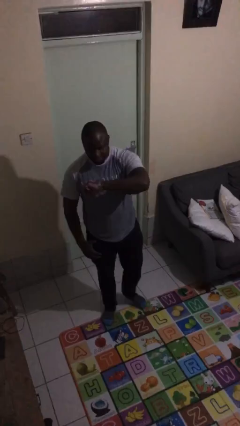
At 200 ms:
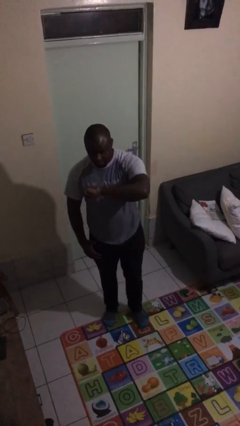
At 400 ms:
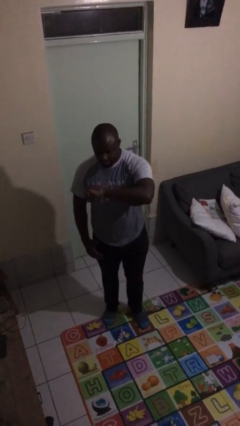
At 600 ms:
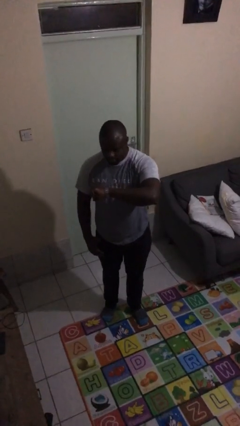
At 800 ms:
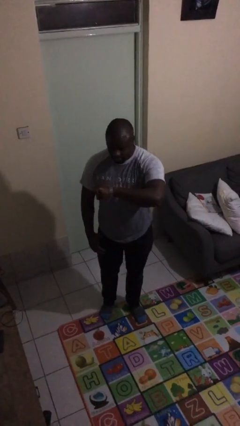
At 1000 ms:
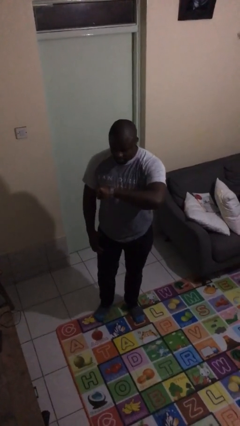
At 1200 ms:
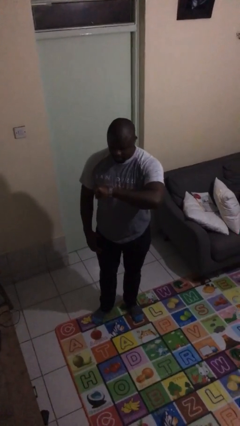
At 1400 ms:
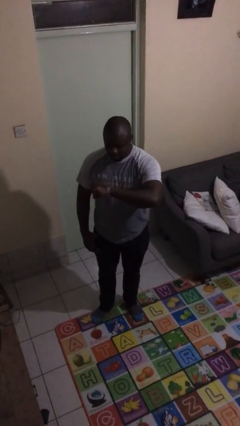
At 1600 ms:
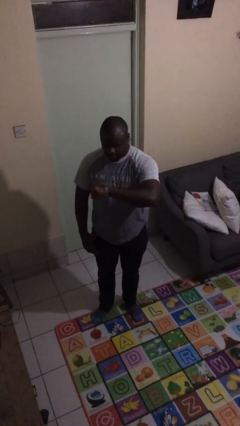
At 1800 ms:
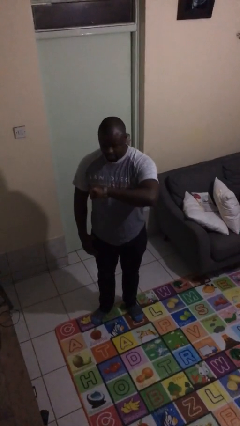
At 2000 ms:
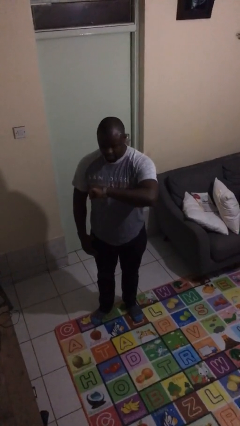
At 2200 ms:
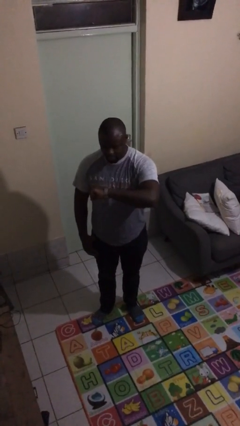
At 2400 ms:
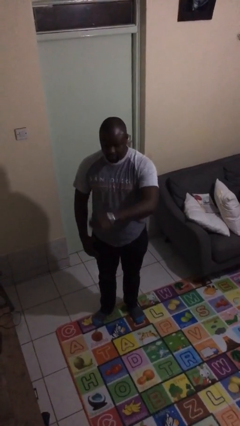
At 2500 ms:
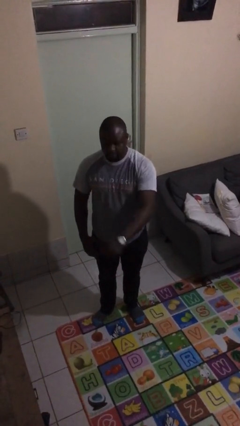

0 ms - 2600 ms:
person looks at wristwatch

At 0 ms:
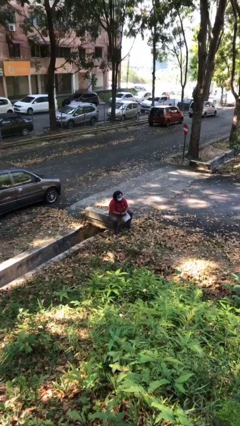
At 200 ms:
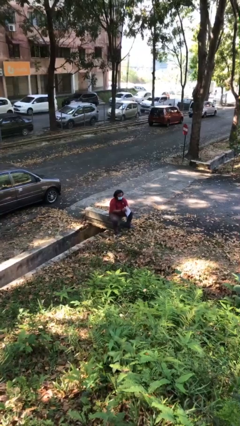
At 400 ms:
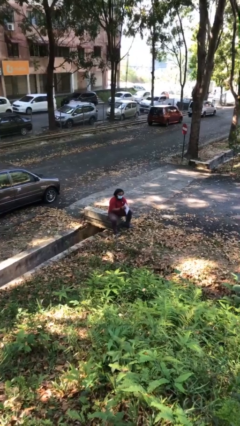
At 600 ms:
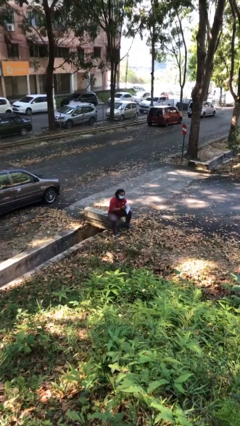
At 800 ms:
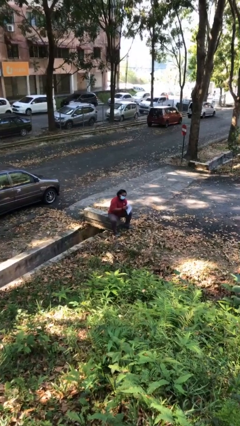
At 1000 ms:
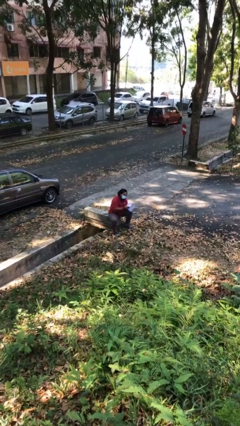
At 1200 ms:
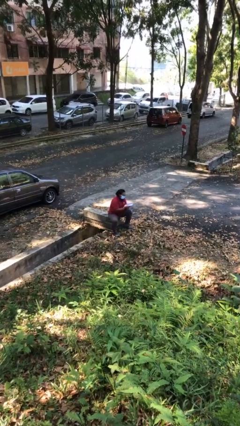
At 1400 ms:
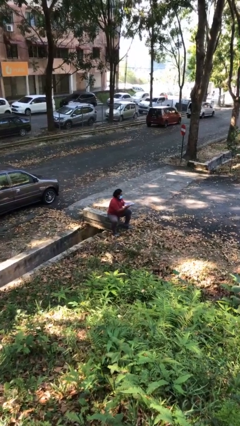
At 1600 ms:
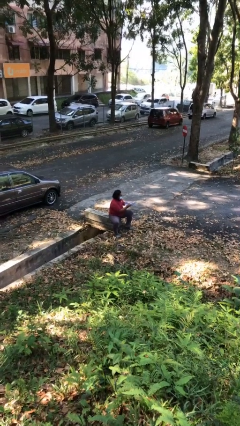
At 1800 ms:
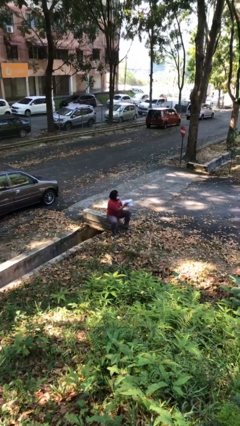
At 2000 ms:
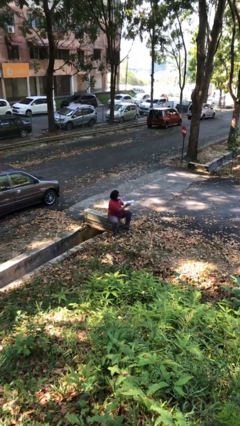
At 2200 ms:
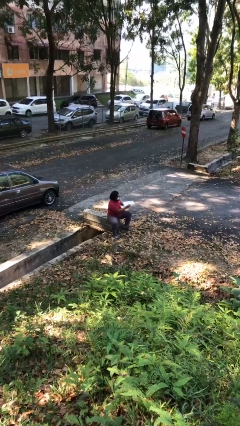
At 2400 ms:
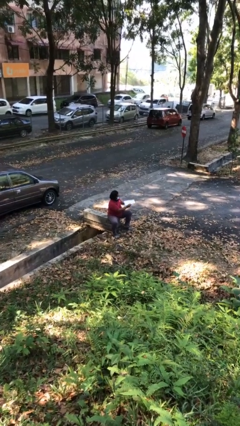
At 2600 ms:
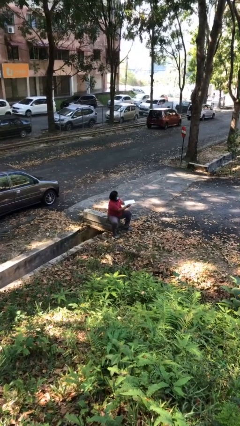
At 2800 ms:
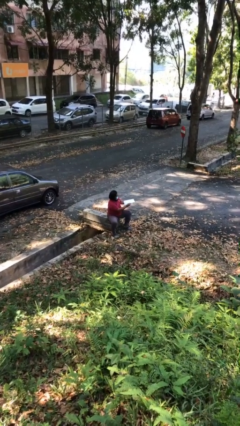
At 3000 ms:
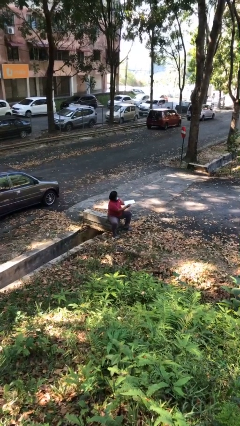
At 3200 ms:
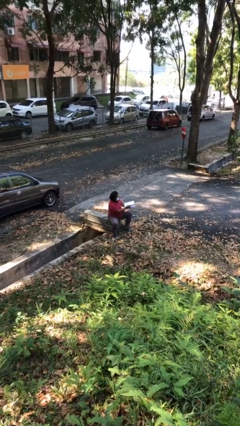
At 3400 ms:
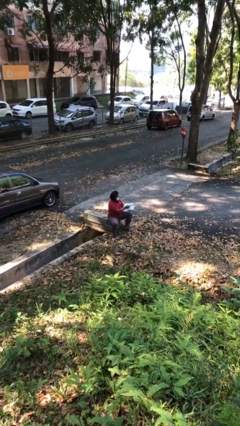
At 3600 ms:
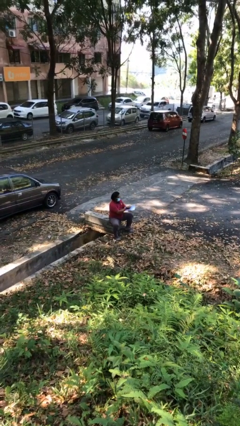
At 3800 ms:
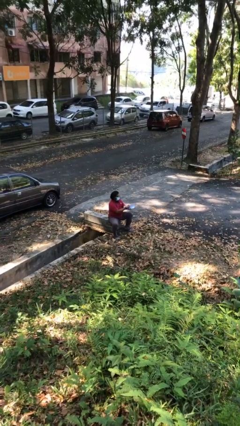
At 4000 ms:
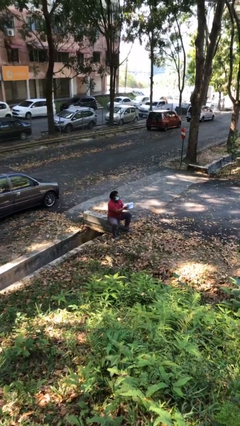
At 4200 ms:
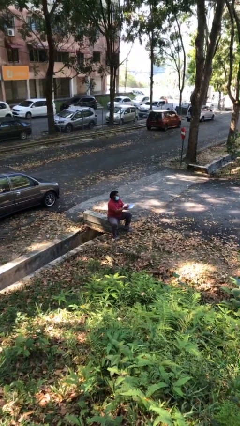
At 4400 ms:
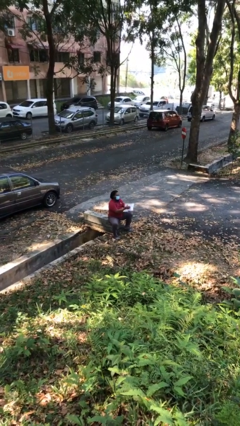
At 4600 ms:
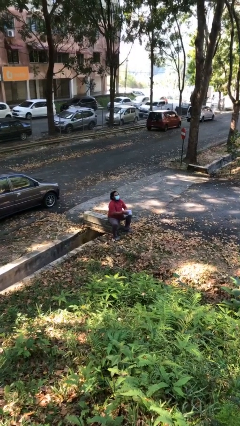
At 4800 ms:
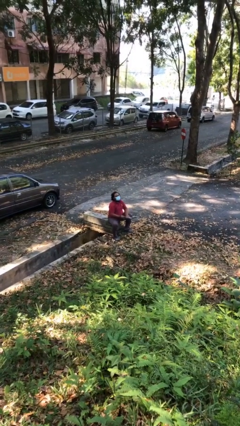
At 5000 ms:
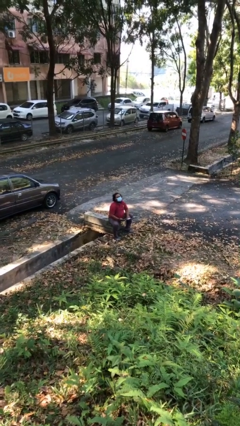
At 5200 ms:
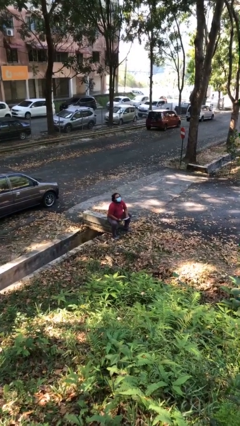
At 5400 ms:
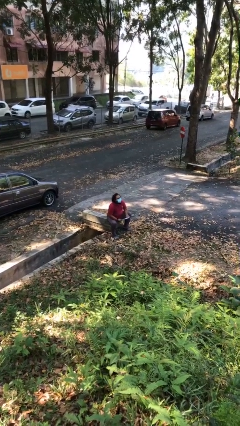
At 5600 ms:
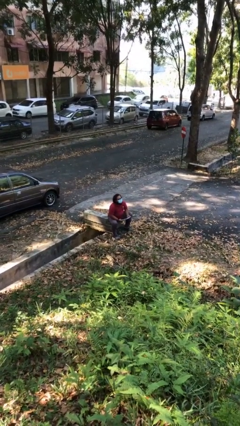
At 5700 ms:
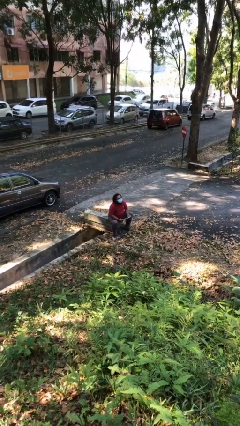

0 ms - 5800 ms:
person reads document

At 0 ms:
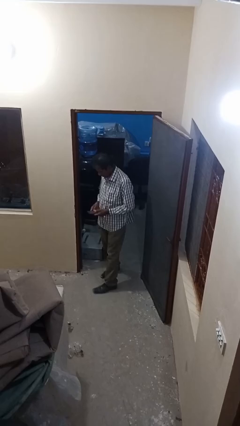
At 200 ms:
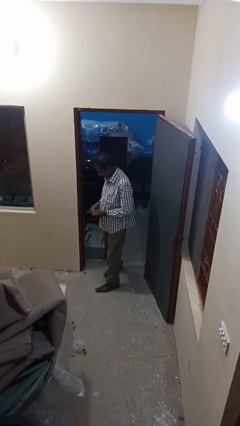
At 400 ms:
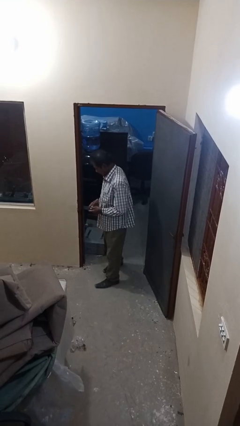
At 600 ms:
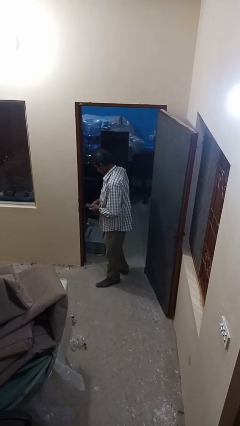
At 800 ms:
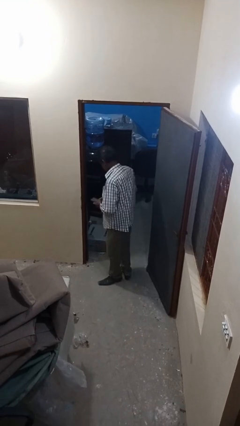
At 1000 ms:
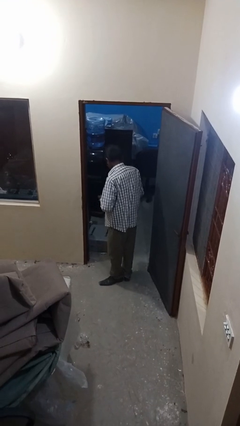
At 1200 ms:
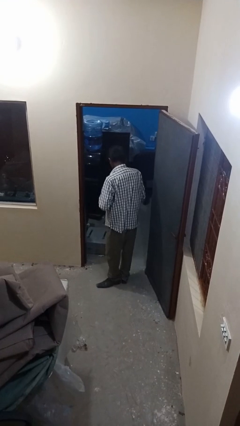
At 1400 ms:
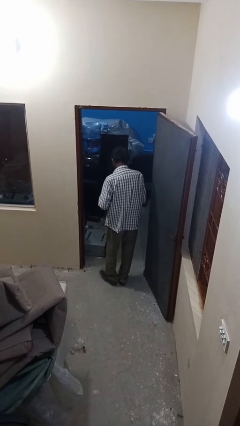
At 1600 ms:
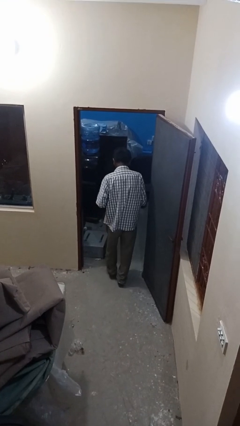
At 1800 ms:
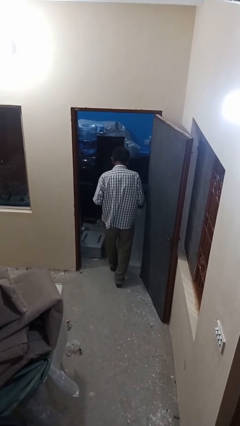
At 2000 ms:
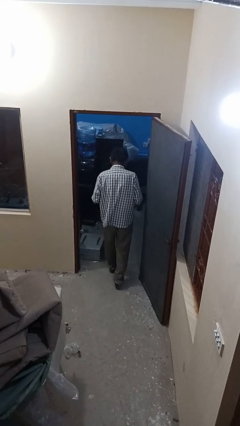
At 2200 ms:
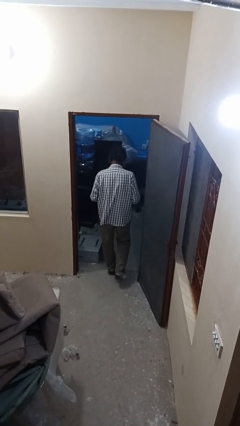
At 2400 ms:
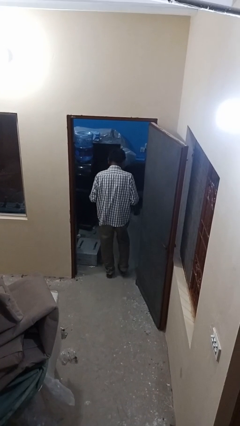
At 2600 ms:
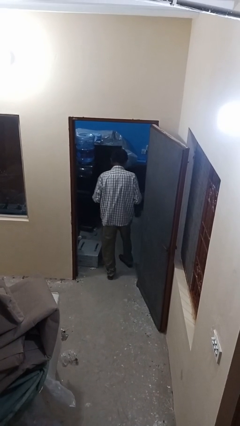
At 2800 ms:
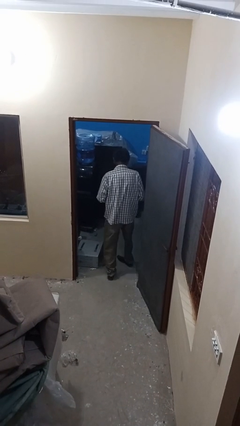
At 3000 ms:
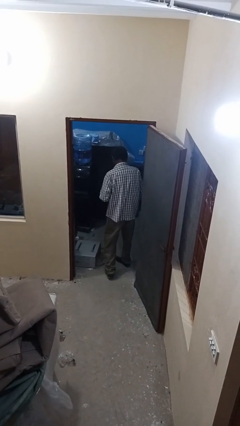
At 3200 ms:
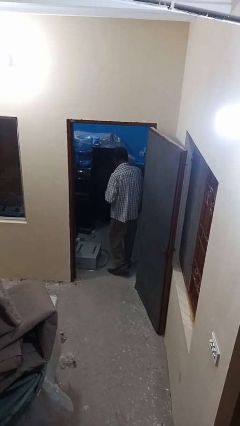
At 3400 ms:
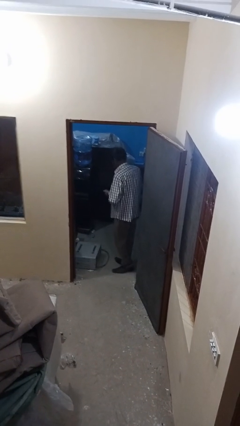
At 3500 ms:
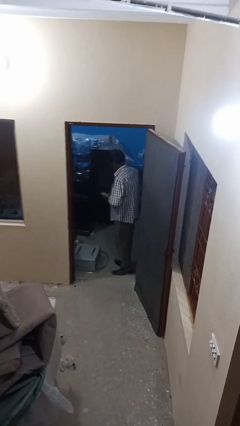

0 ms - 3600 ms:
person exits scene through structure

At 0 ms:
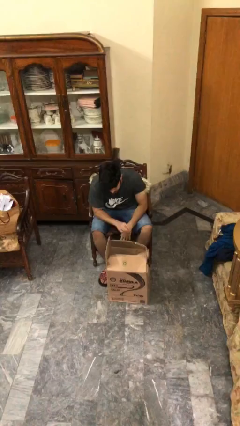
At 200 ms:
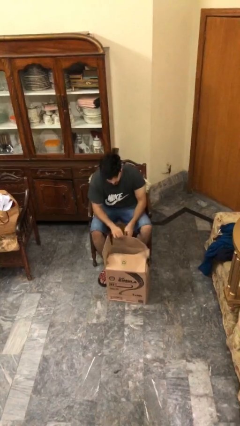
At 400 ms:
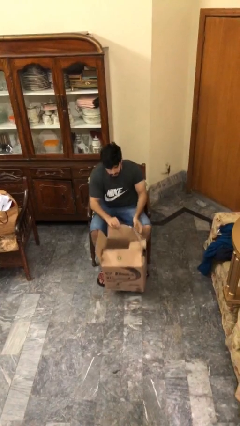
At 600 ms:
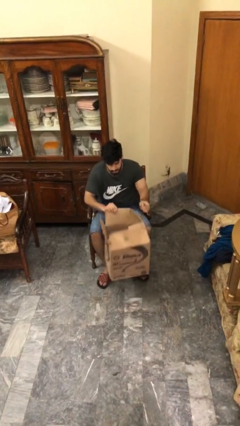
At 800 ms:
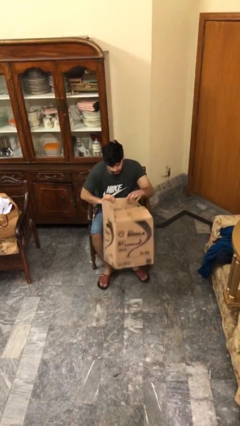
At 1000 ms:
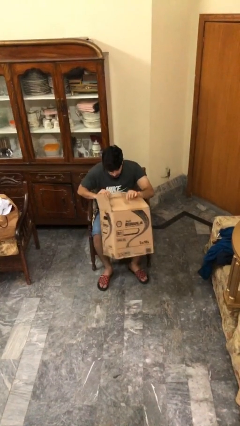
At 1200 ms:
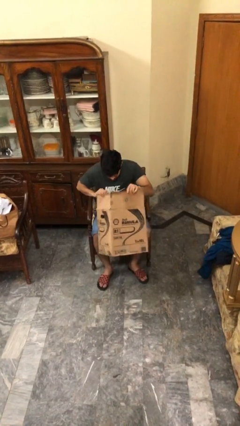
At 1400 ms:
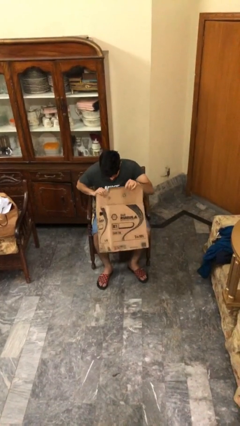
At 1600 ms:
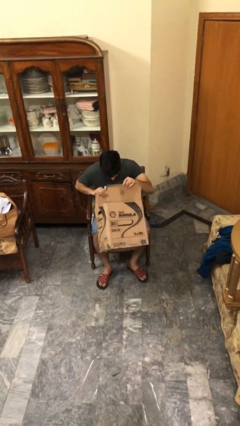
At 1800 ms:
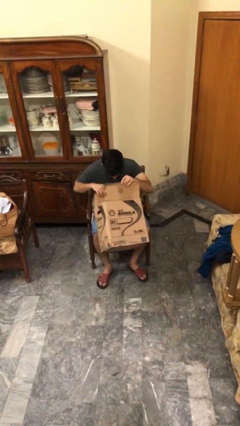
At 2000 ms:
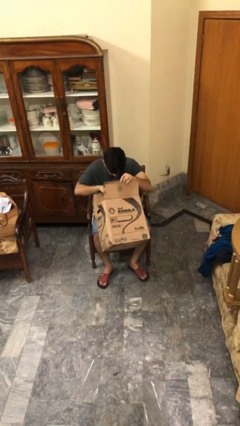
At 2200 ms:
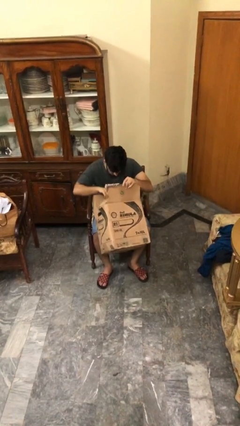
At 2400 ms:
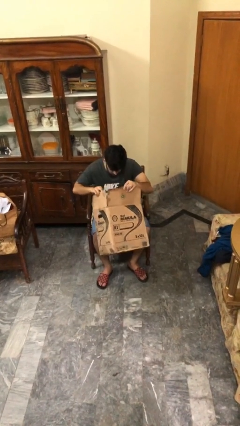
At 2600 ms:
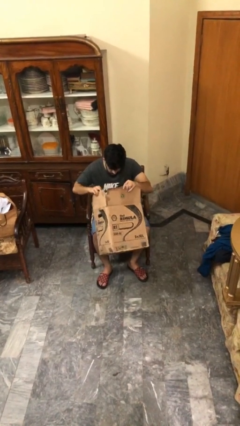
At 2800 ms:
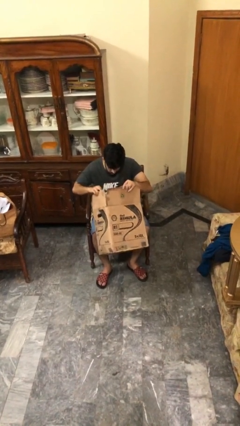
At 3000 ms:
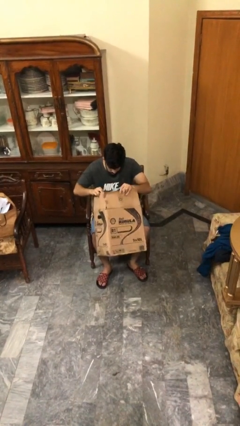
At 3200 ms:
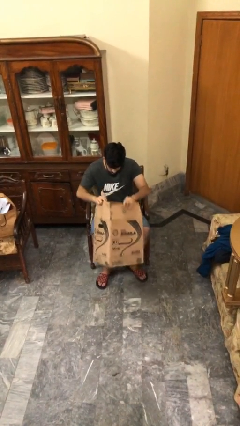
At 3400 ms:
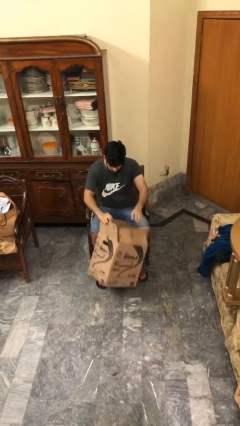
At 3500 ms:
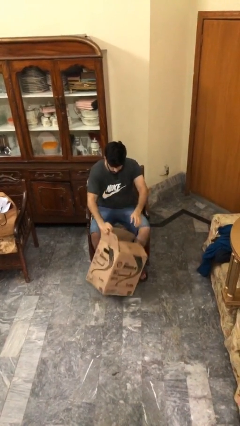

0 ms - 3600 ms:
person searches in box

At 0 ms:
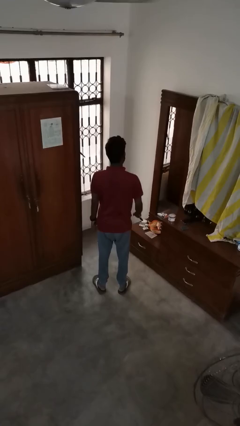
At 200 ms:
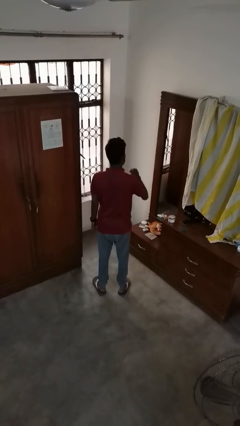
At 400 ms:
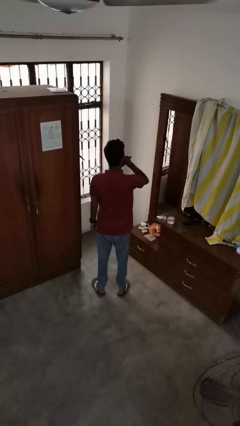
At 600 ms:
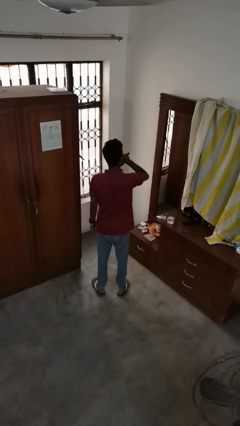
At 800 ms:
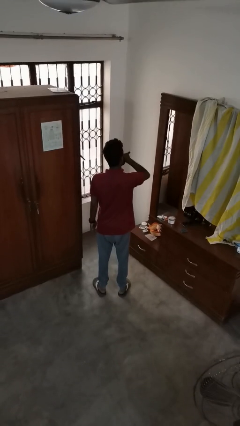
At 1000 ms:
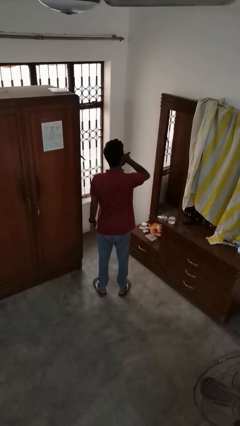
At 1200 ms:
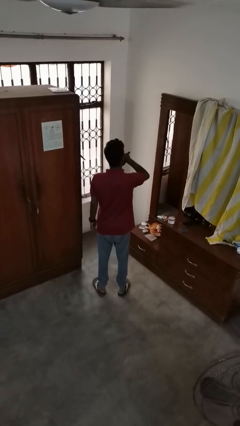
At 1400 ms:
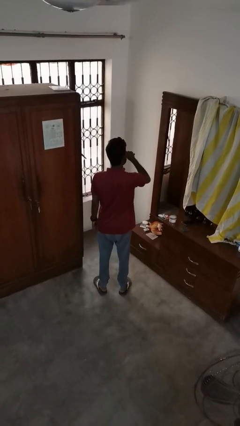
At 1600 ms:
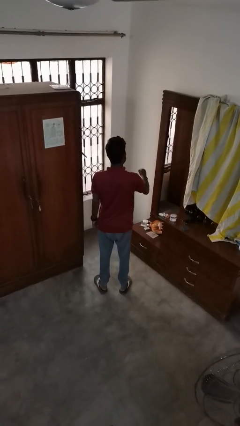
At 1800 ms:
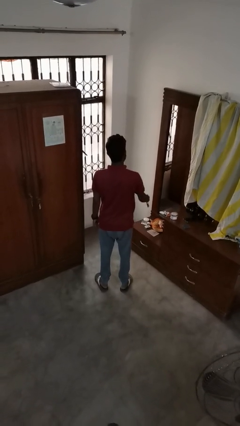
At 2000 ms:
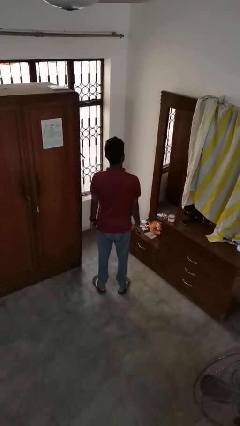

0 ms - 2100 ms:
person vapes
